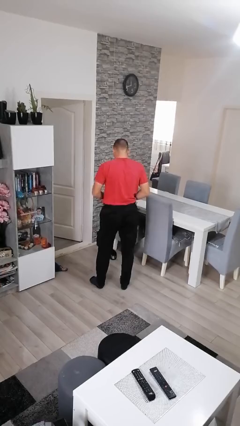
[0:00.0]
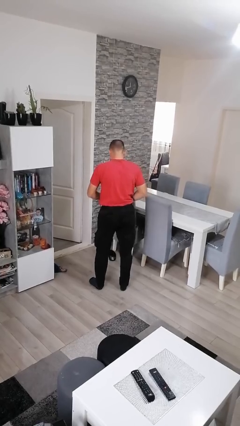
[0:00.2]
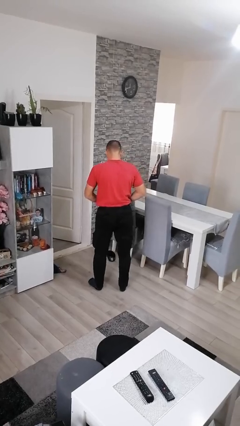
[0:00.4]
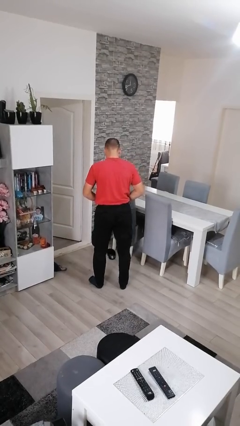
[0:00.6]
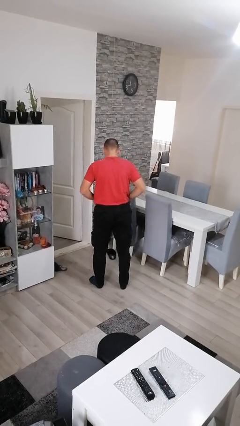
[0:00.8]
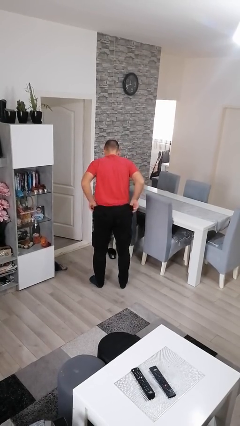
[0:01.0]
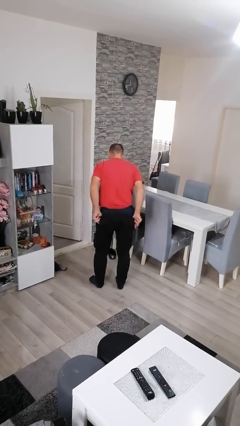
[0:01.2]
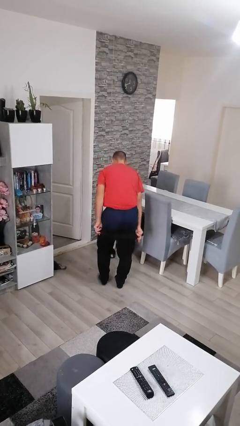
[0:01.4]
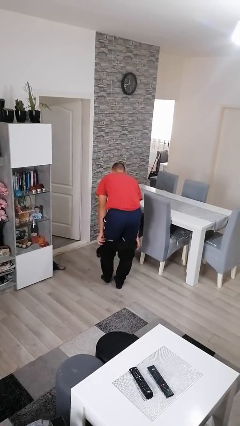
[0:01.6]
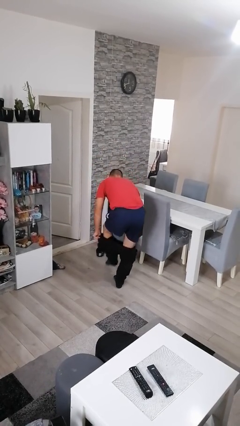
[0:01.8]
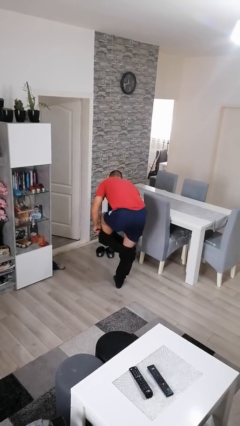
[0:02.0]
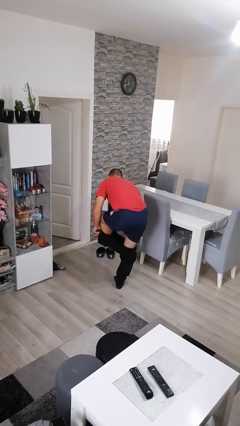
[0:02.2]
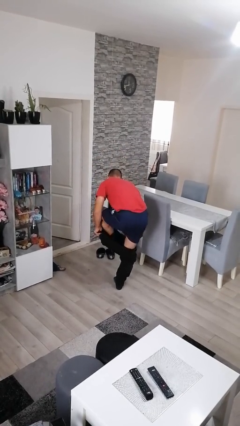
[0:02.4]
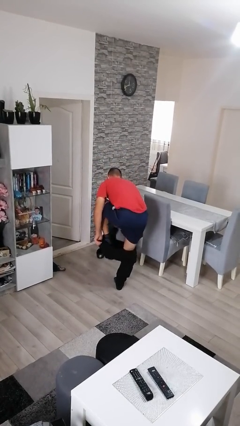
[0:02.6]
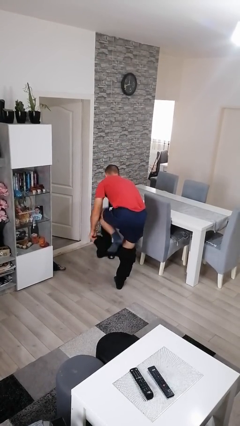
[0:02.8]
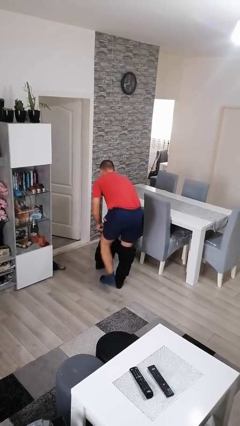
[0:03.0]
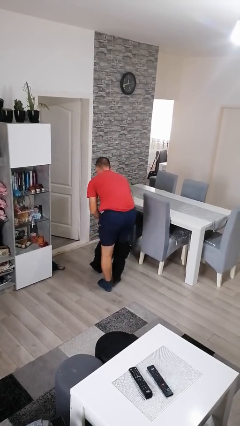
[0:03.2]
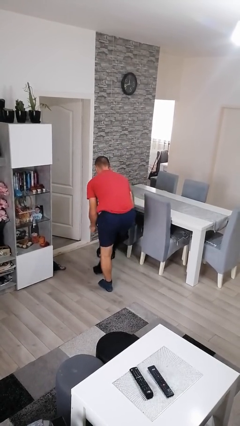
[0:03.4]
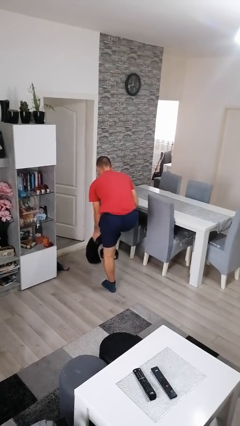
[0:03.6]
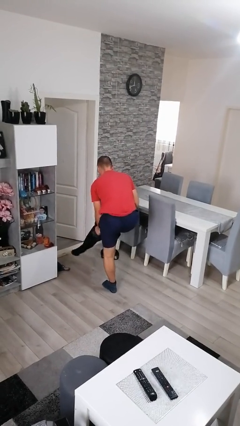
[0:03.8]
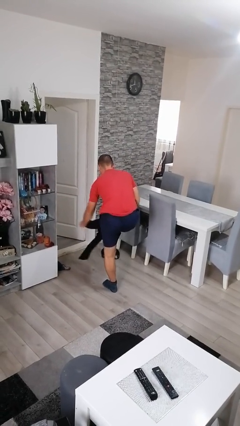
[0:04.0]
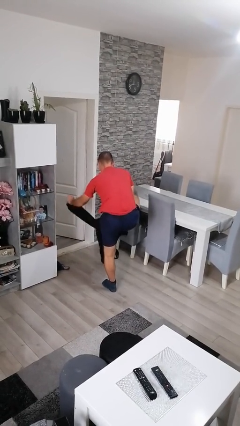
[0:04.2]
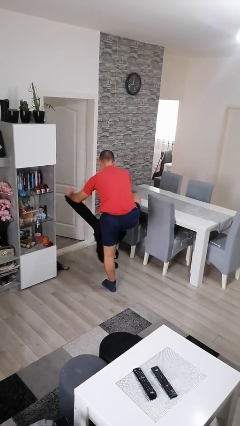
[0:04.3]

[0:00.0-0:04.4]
person takes off pants

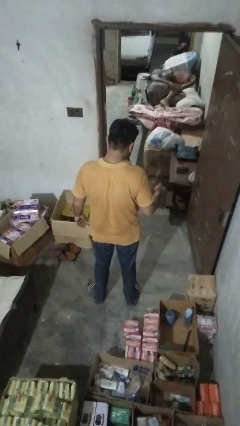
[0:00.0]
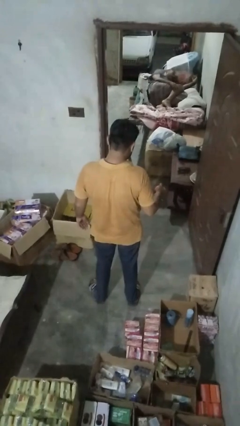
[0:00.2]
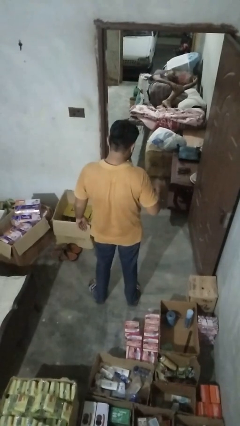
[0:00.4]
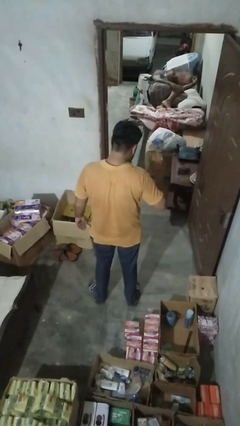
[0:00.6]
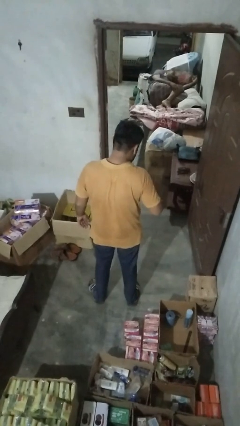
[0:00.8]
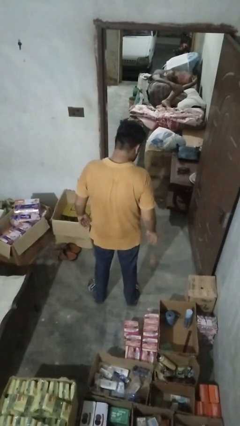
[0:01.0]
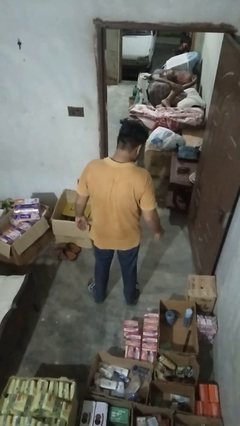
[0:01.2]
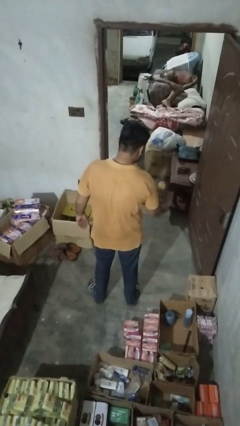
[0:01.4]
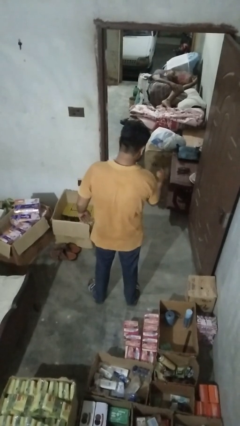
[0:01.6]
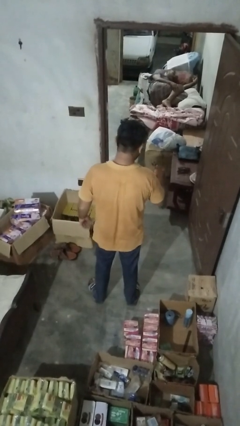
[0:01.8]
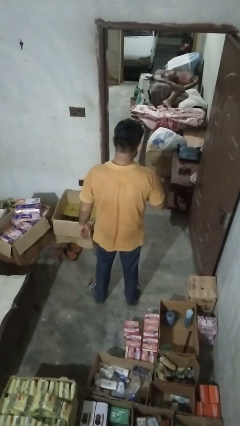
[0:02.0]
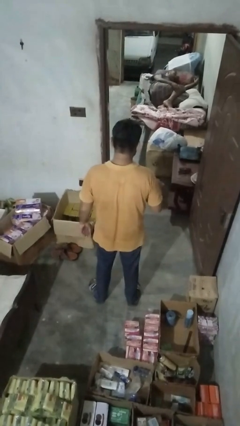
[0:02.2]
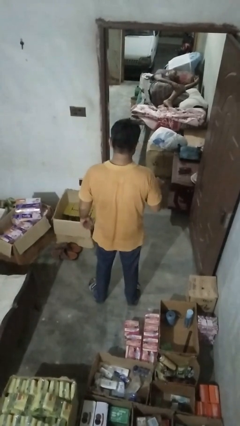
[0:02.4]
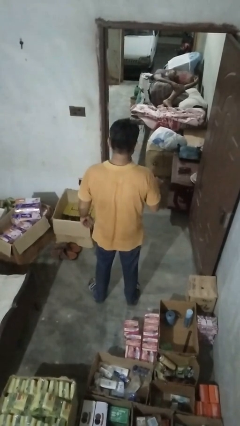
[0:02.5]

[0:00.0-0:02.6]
person bounces ball on floor

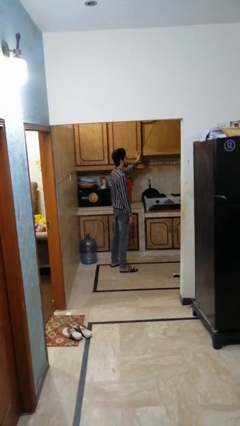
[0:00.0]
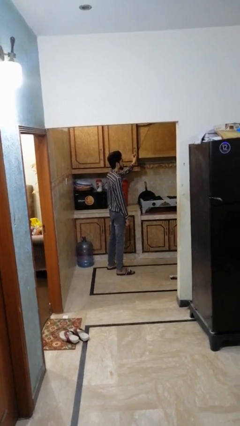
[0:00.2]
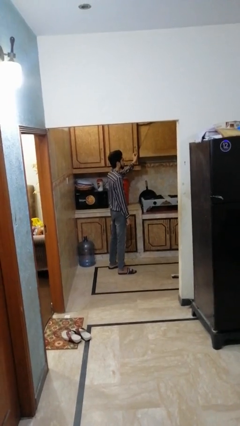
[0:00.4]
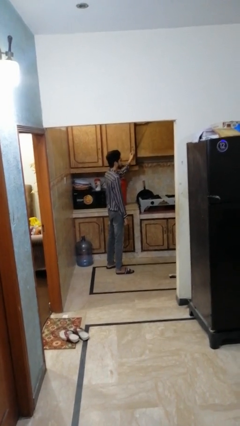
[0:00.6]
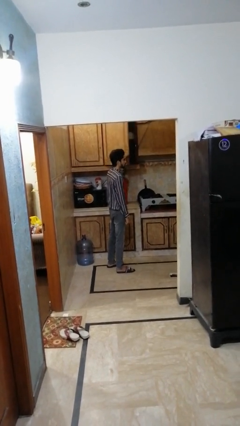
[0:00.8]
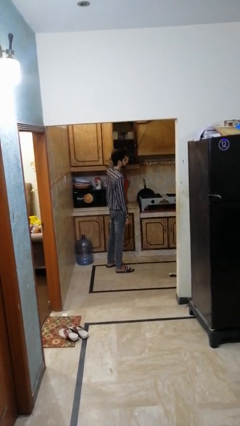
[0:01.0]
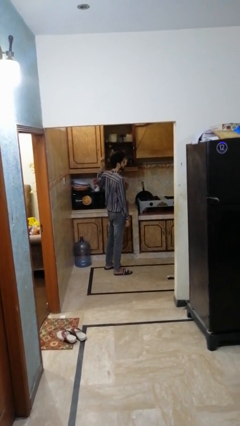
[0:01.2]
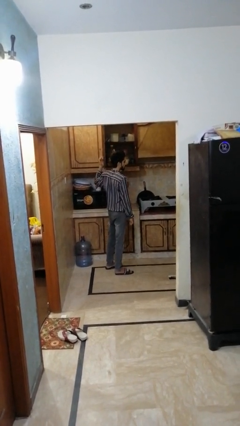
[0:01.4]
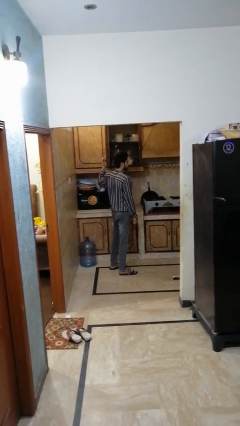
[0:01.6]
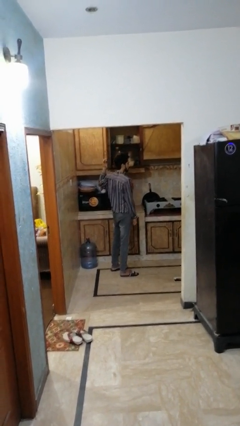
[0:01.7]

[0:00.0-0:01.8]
person opens cabinet

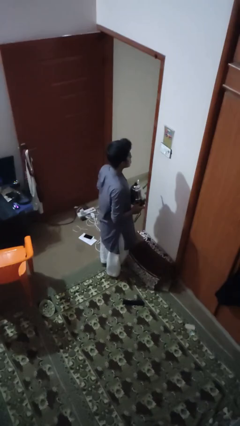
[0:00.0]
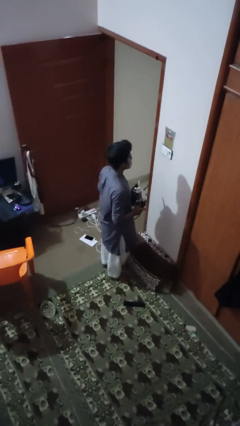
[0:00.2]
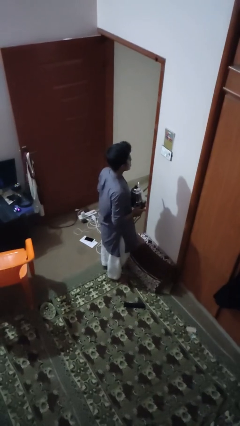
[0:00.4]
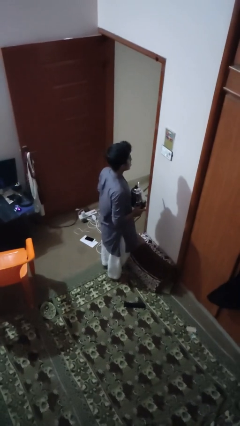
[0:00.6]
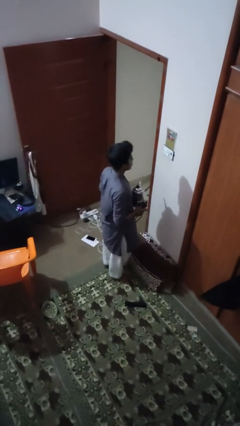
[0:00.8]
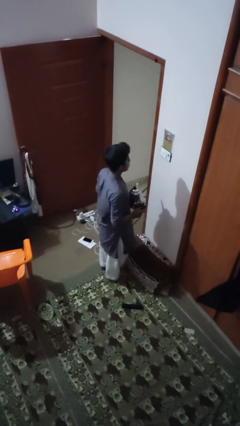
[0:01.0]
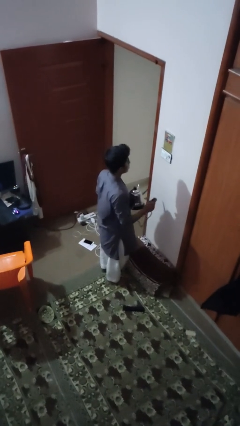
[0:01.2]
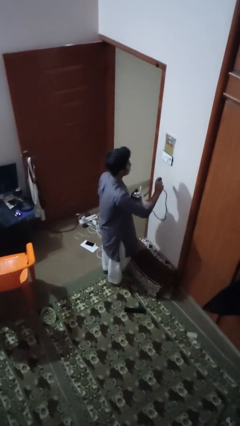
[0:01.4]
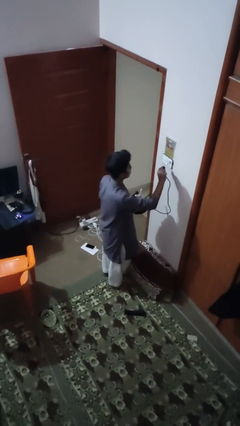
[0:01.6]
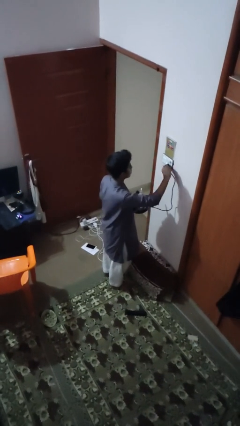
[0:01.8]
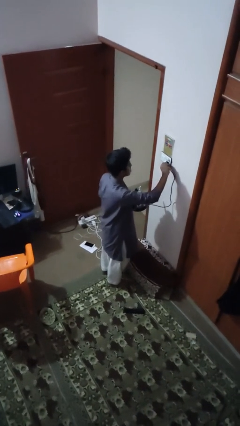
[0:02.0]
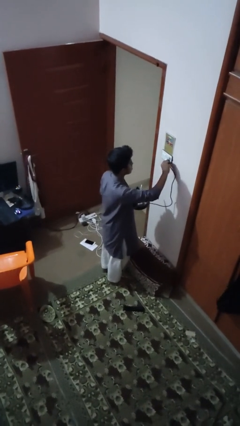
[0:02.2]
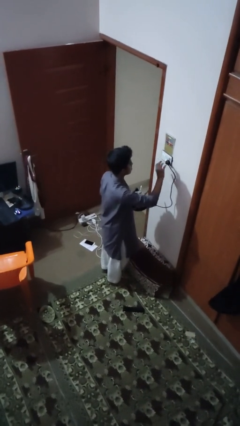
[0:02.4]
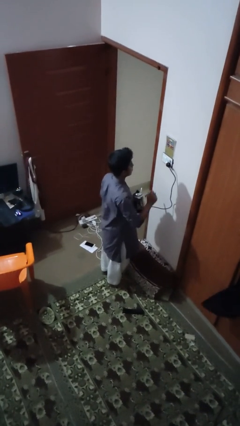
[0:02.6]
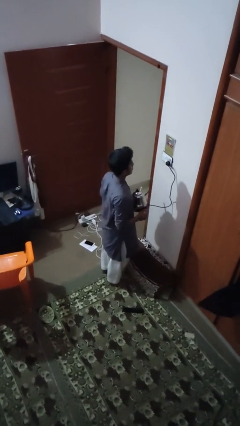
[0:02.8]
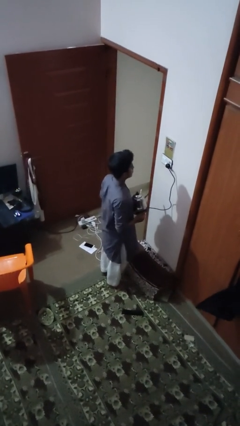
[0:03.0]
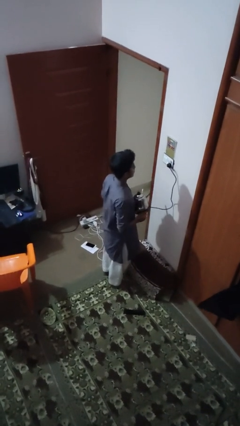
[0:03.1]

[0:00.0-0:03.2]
person plugs into electrical socket

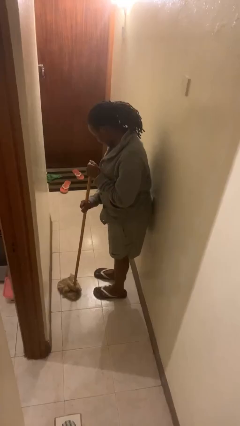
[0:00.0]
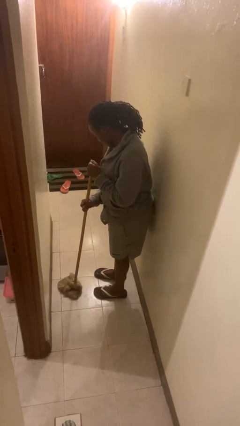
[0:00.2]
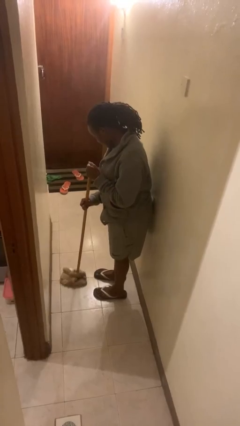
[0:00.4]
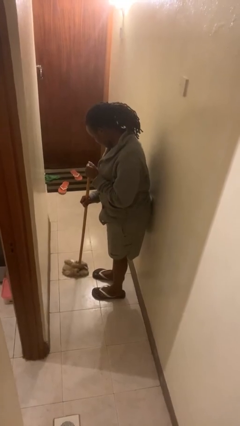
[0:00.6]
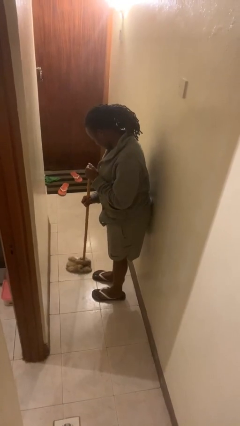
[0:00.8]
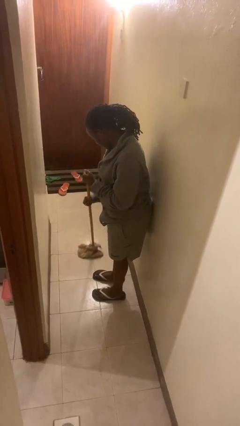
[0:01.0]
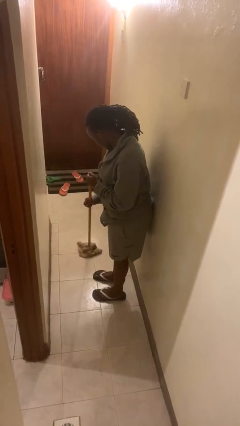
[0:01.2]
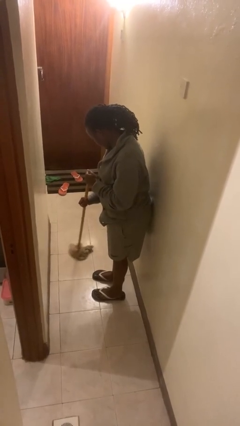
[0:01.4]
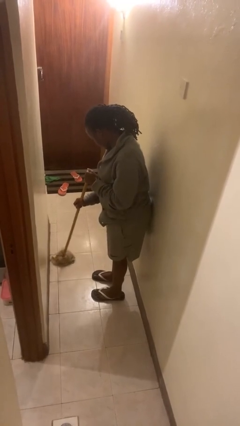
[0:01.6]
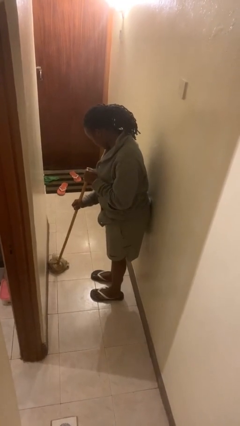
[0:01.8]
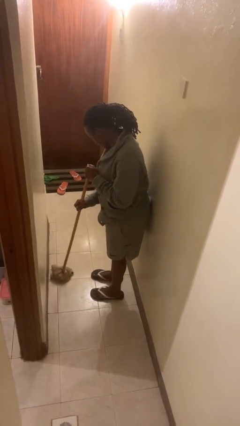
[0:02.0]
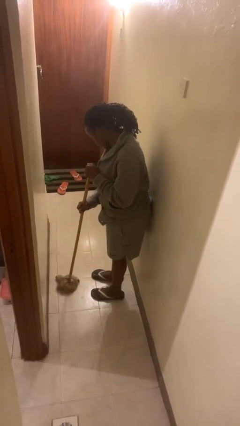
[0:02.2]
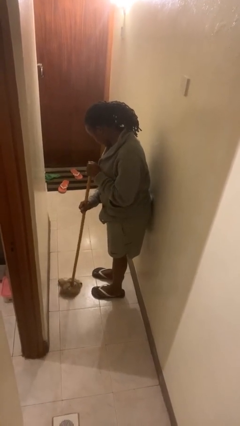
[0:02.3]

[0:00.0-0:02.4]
person mops

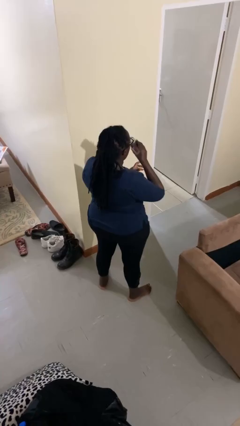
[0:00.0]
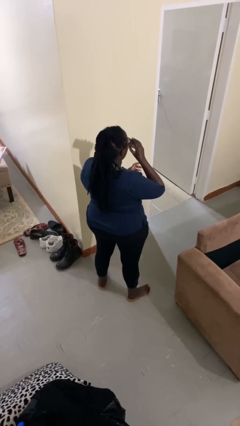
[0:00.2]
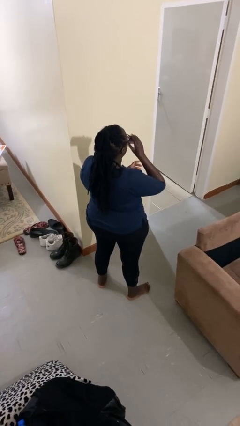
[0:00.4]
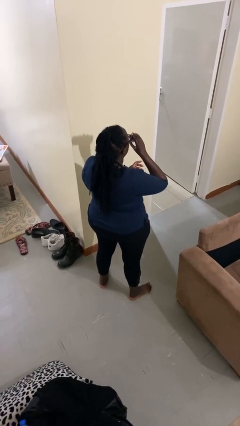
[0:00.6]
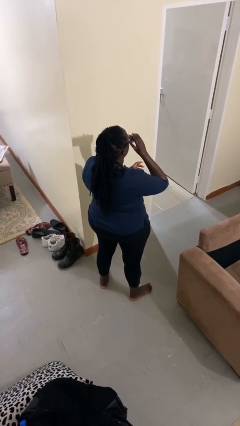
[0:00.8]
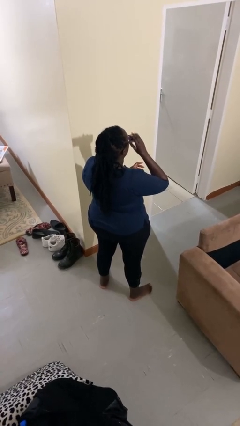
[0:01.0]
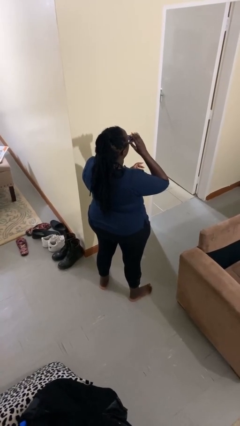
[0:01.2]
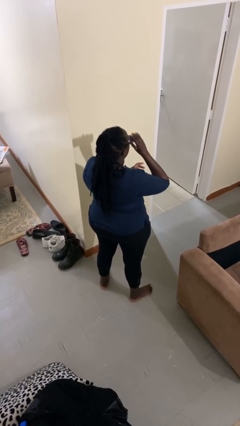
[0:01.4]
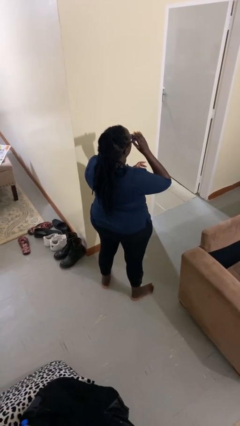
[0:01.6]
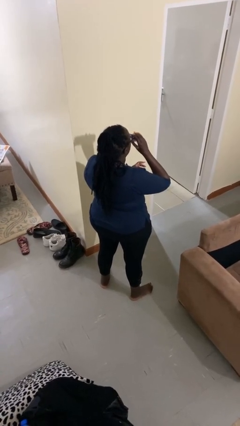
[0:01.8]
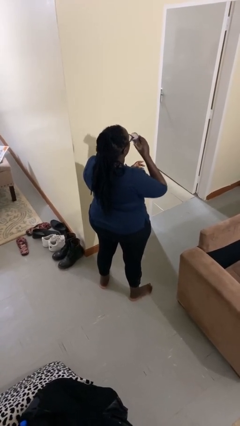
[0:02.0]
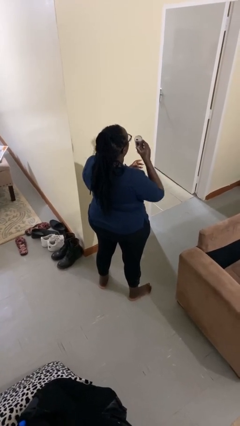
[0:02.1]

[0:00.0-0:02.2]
person drinks from beverage can

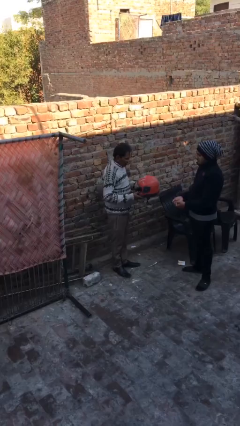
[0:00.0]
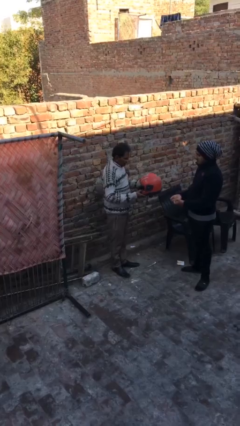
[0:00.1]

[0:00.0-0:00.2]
person transfers object to person
